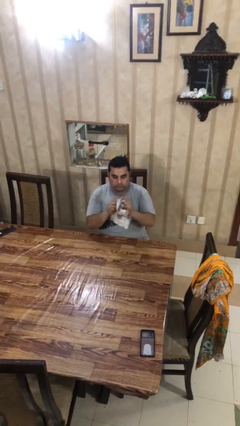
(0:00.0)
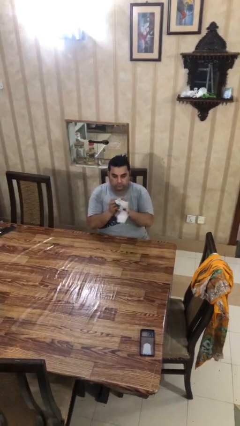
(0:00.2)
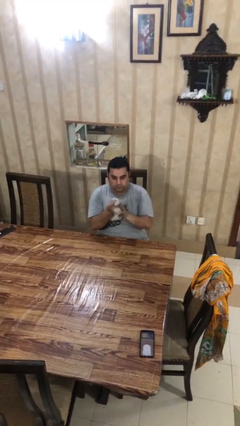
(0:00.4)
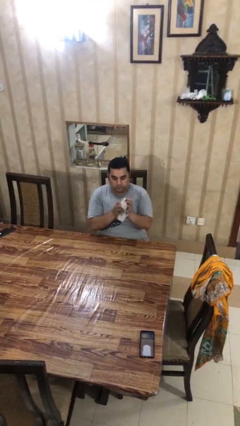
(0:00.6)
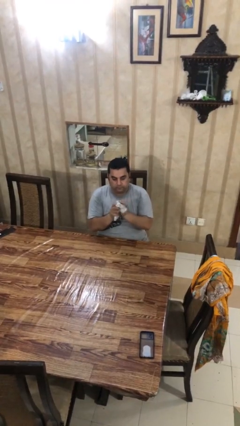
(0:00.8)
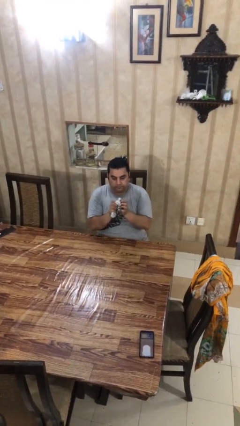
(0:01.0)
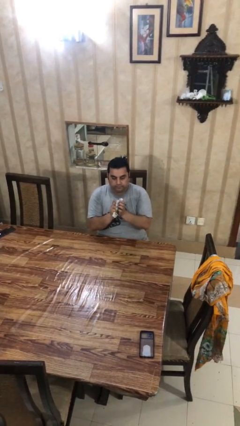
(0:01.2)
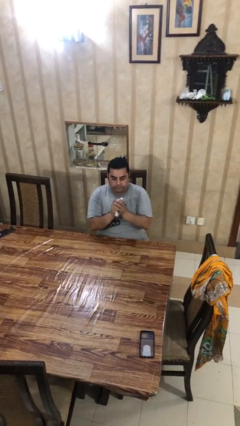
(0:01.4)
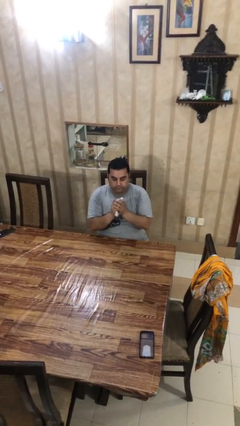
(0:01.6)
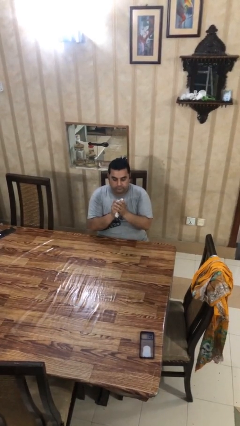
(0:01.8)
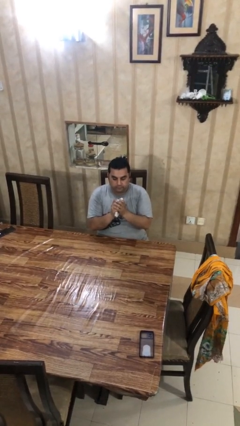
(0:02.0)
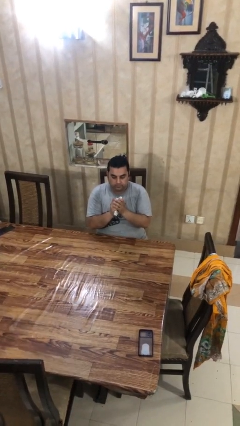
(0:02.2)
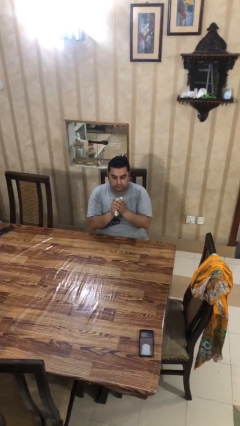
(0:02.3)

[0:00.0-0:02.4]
person crumples paper

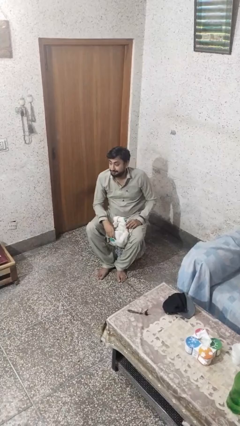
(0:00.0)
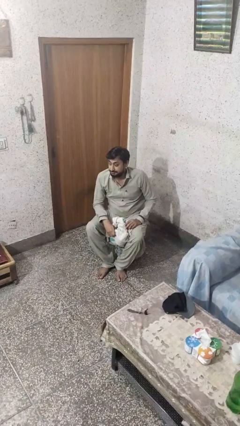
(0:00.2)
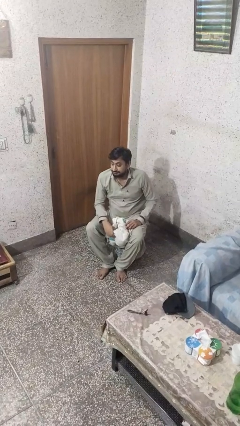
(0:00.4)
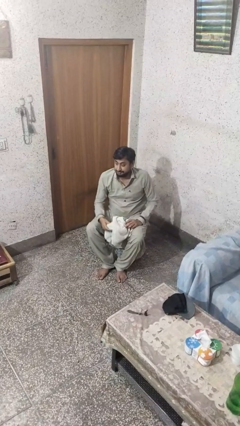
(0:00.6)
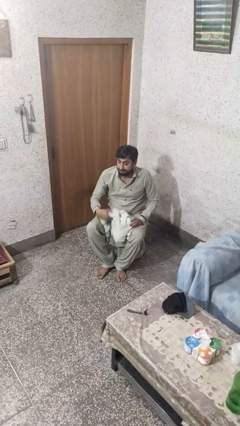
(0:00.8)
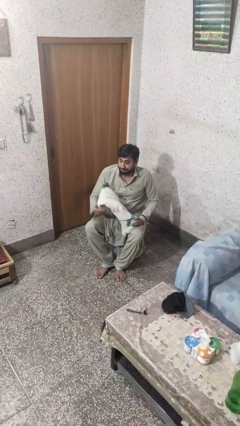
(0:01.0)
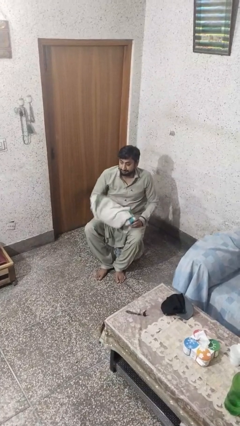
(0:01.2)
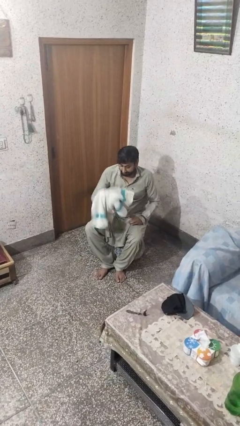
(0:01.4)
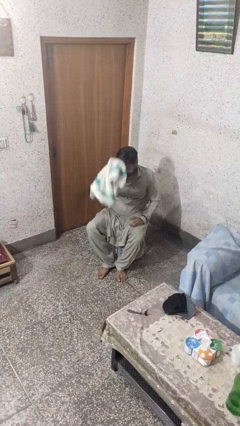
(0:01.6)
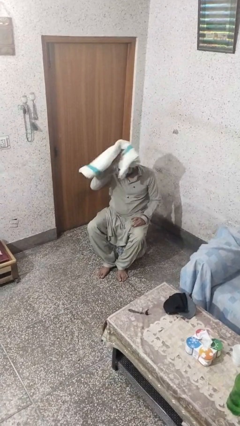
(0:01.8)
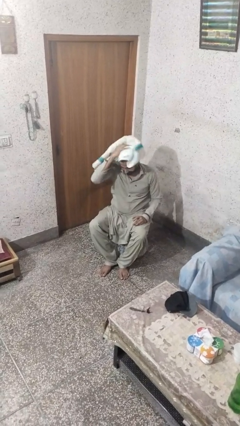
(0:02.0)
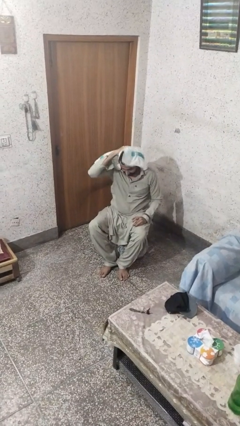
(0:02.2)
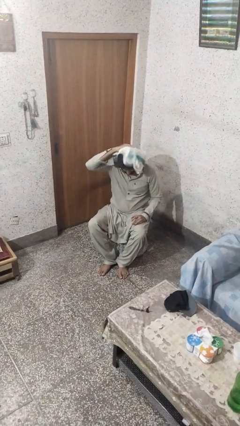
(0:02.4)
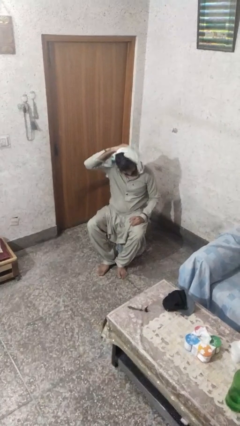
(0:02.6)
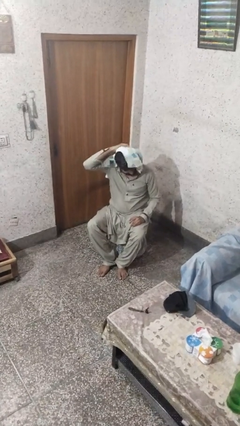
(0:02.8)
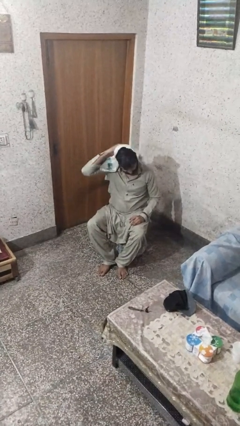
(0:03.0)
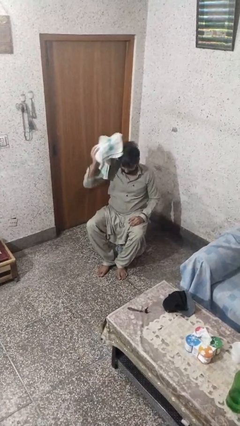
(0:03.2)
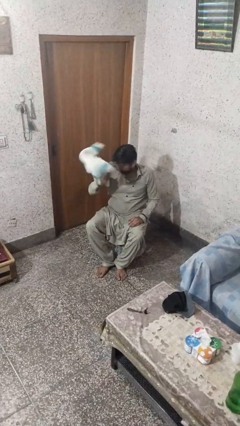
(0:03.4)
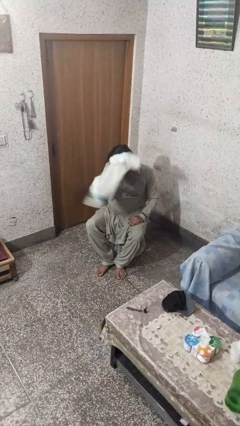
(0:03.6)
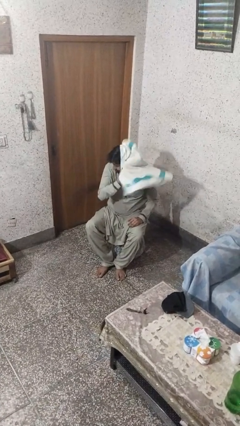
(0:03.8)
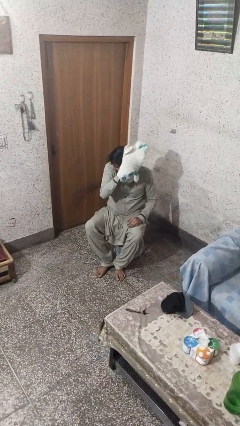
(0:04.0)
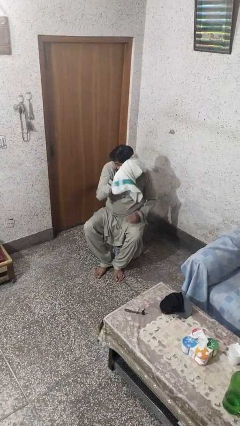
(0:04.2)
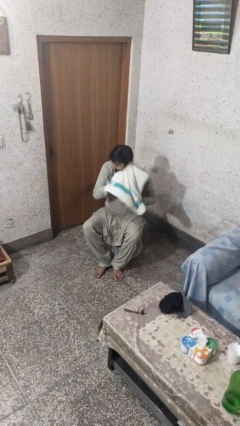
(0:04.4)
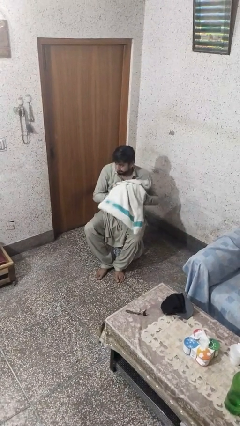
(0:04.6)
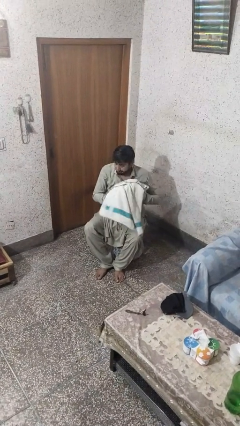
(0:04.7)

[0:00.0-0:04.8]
person dries hair with towel

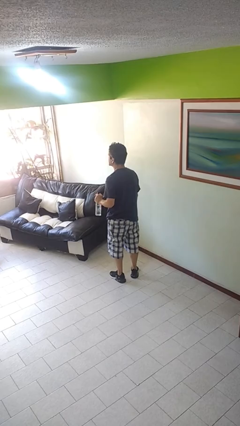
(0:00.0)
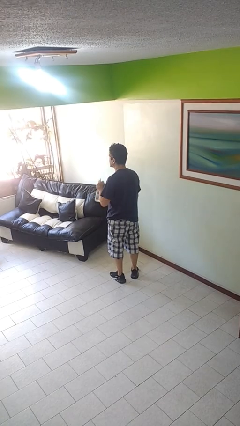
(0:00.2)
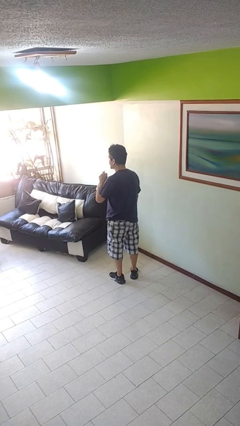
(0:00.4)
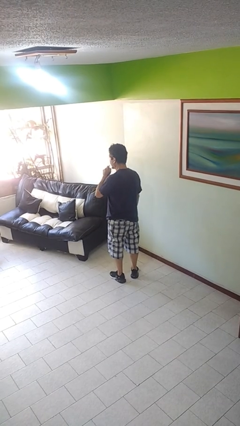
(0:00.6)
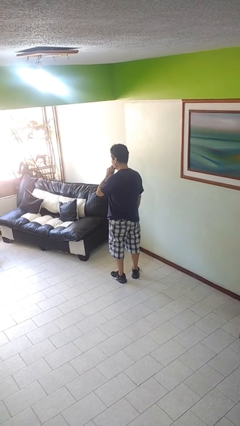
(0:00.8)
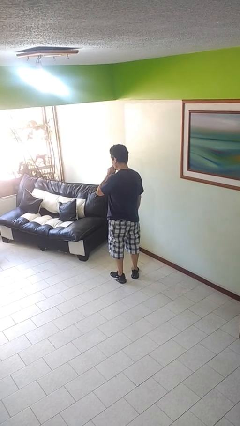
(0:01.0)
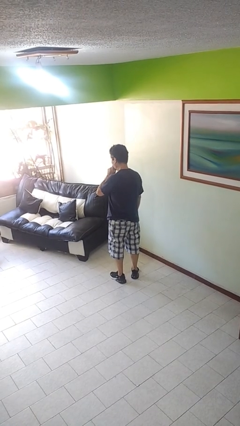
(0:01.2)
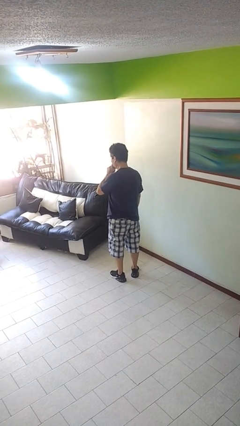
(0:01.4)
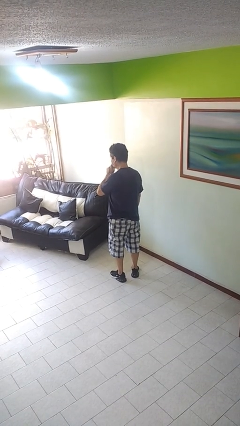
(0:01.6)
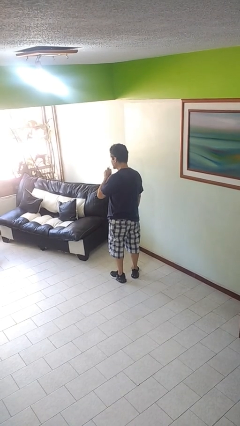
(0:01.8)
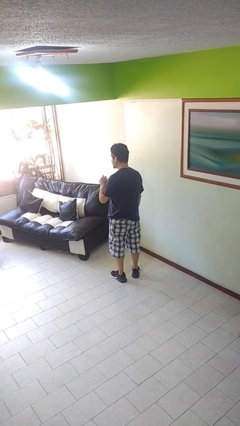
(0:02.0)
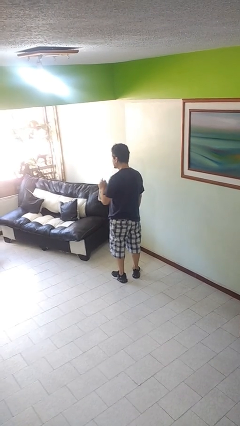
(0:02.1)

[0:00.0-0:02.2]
person drinks from straw

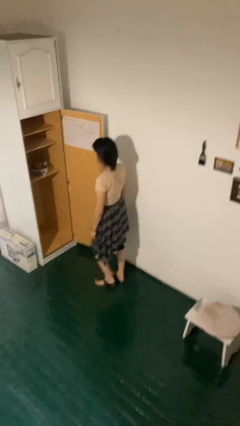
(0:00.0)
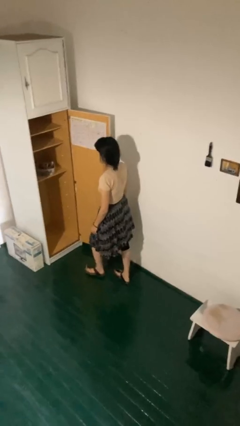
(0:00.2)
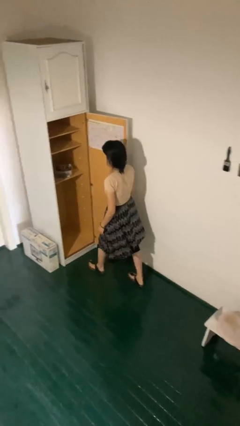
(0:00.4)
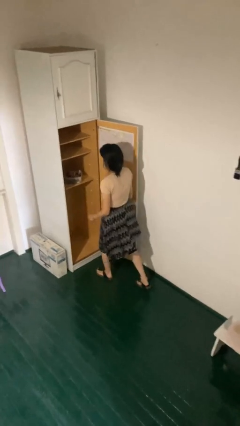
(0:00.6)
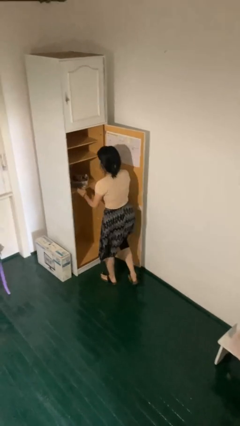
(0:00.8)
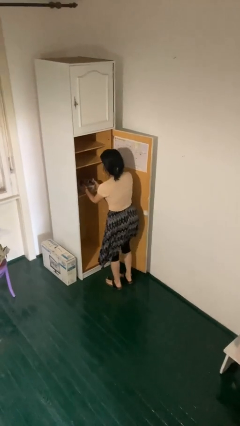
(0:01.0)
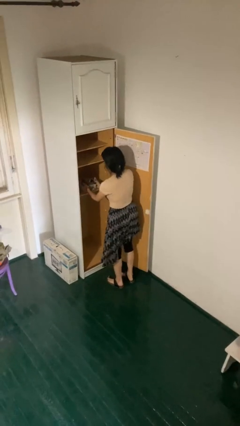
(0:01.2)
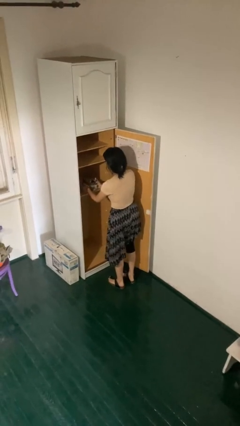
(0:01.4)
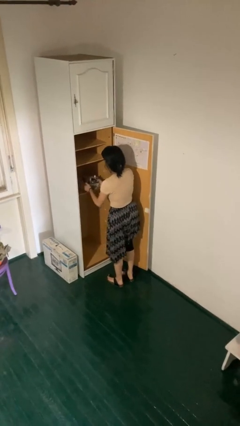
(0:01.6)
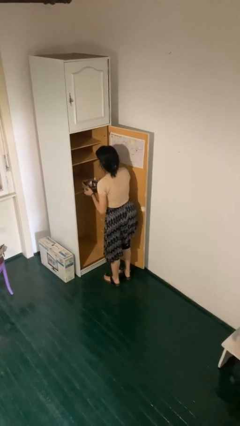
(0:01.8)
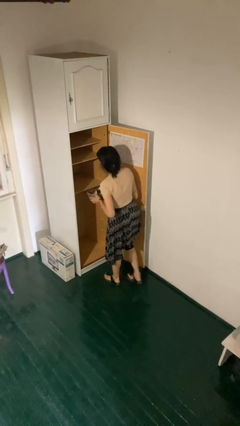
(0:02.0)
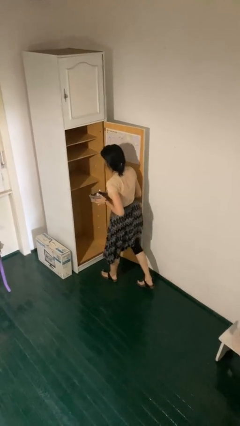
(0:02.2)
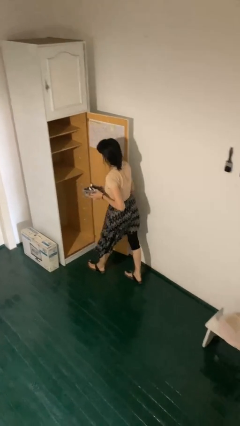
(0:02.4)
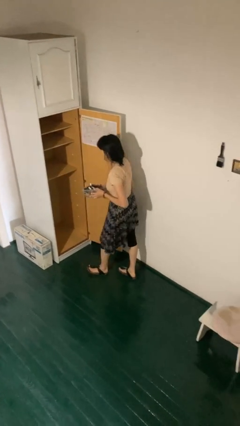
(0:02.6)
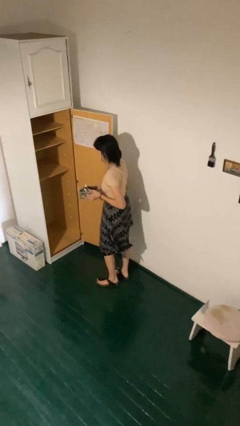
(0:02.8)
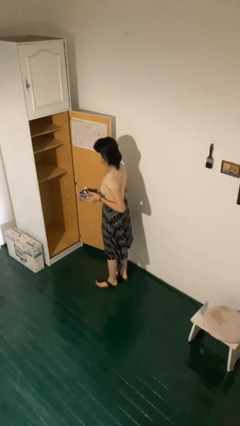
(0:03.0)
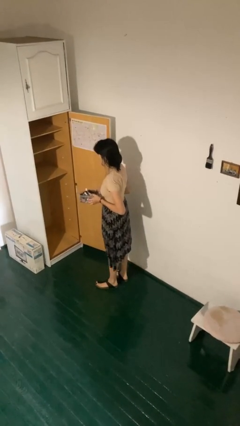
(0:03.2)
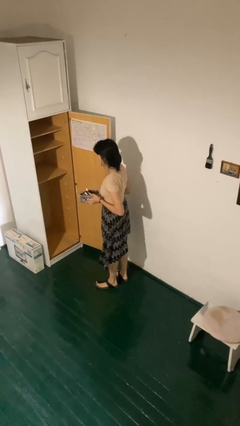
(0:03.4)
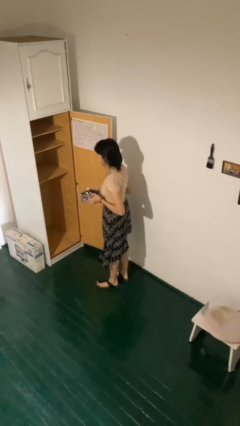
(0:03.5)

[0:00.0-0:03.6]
person picks up object from cabinet

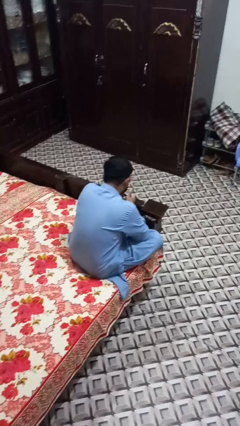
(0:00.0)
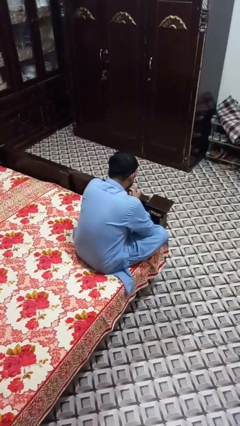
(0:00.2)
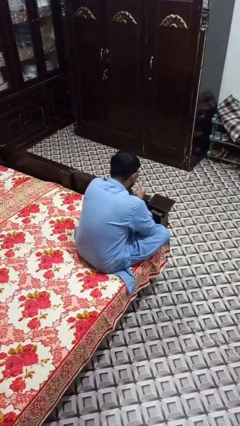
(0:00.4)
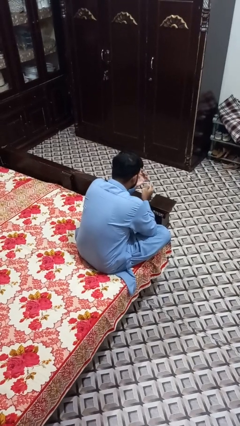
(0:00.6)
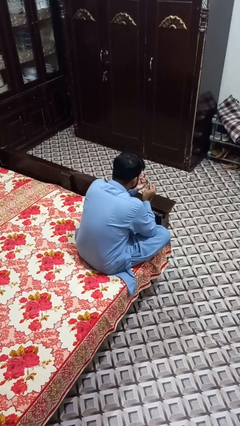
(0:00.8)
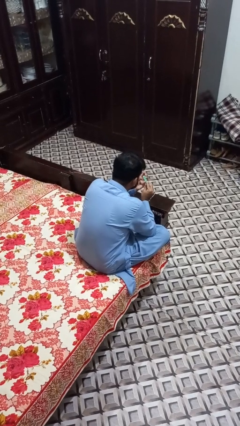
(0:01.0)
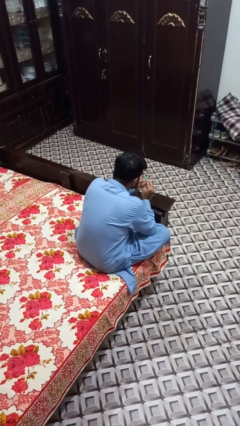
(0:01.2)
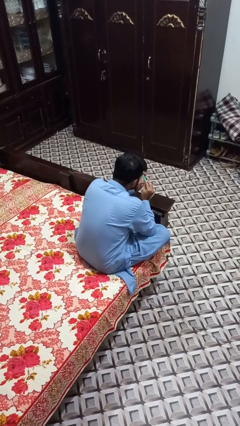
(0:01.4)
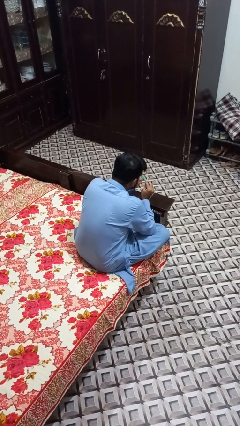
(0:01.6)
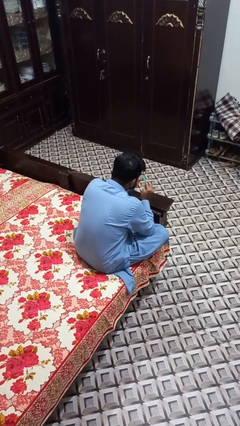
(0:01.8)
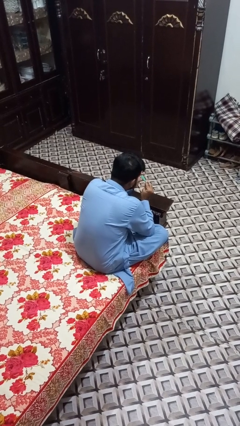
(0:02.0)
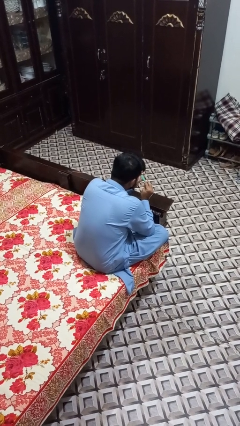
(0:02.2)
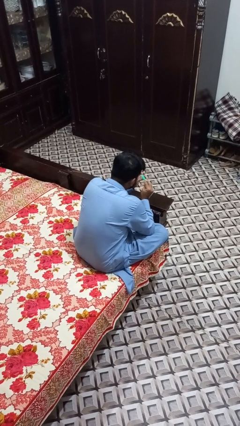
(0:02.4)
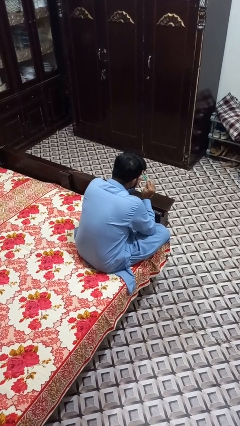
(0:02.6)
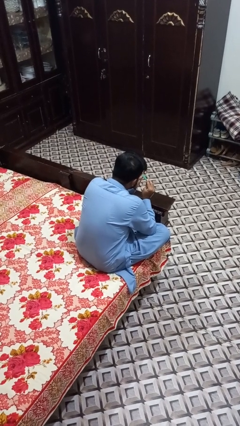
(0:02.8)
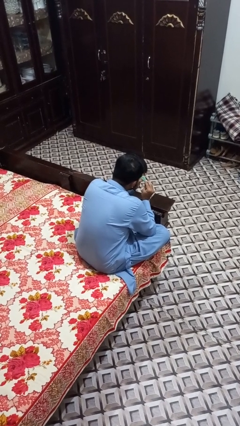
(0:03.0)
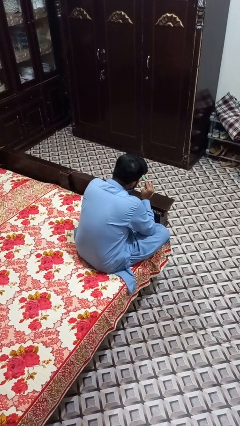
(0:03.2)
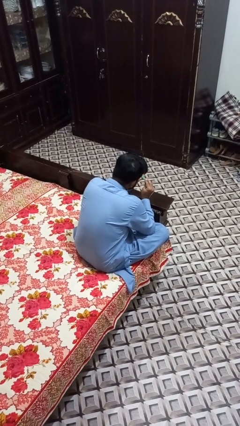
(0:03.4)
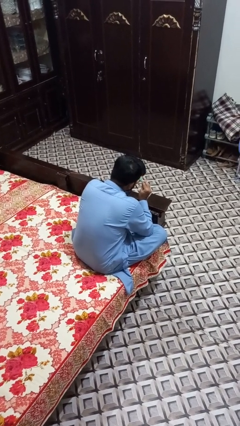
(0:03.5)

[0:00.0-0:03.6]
person files fingernails

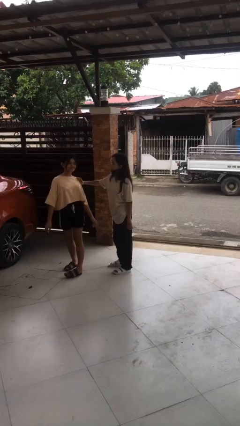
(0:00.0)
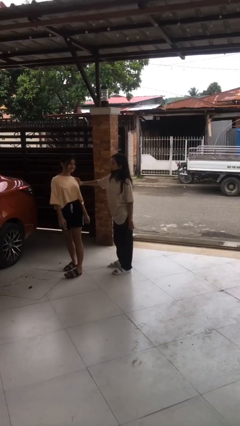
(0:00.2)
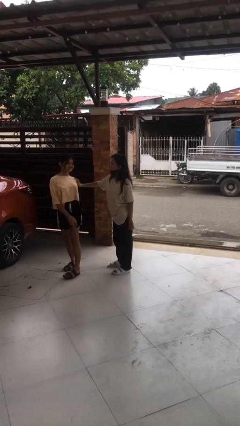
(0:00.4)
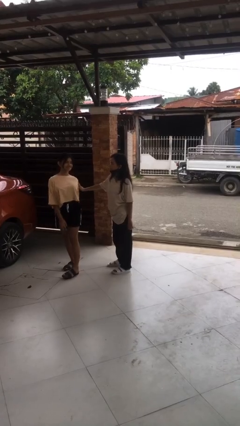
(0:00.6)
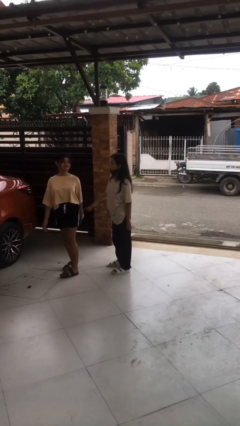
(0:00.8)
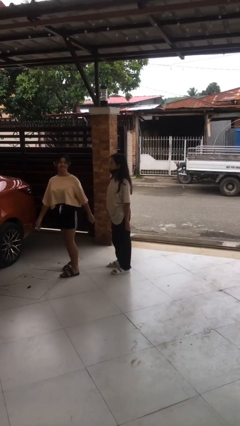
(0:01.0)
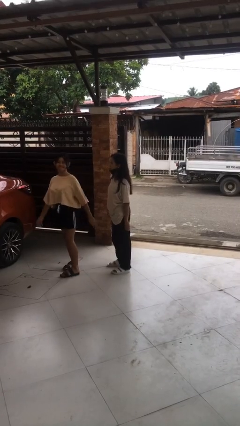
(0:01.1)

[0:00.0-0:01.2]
person spins person around
